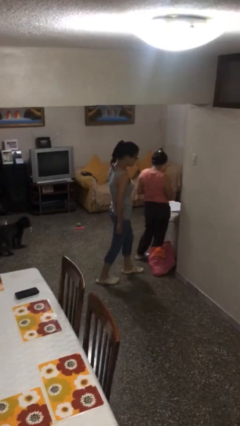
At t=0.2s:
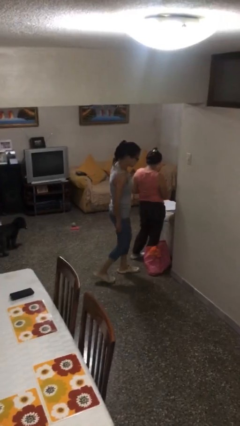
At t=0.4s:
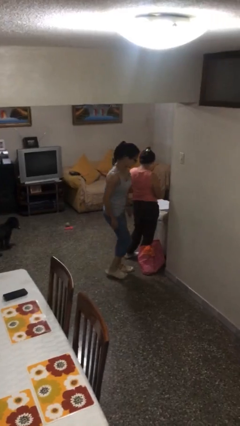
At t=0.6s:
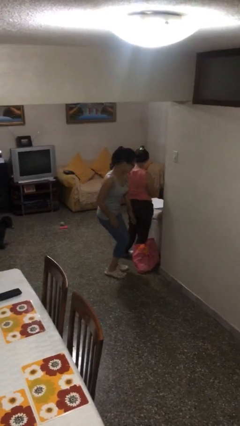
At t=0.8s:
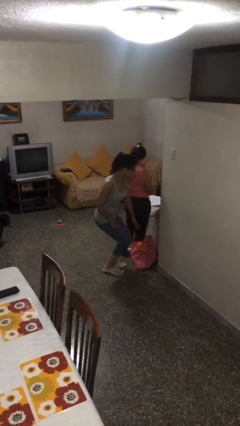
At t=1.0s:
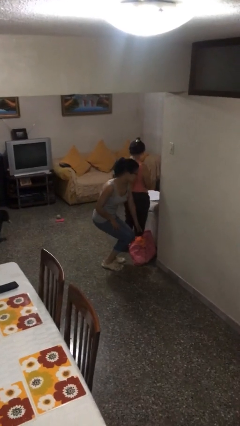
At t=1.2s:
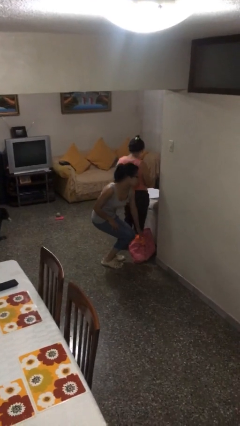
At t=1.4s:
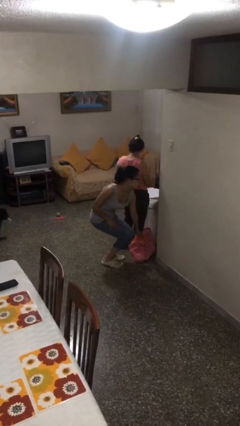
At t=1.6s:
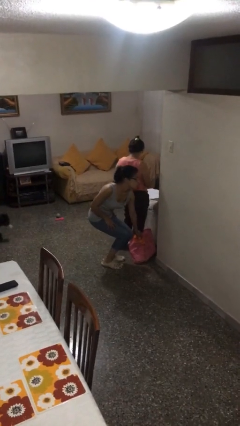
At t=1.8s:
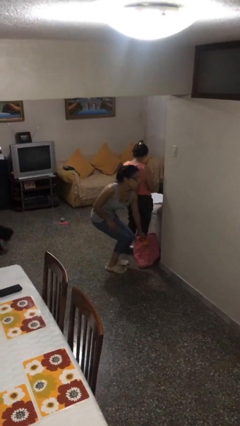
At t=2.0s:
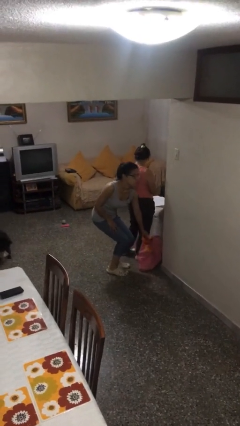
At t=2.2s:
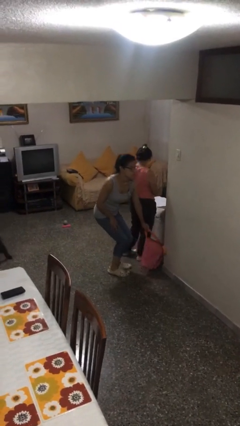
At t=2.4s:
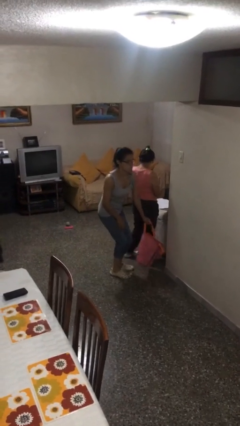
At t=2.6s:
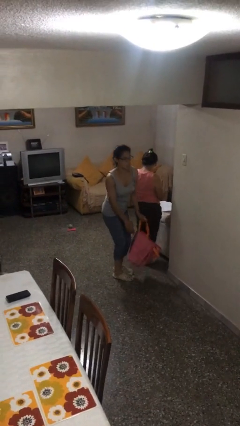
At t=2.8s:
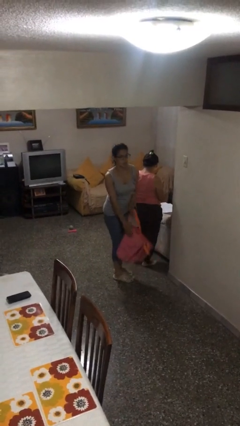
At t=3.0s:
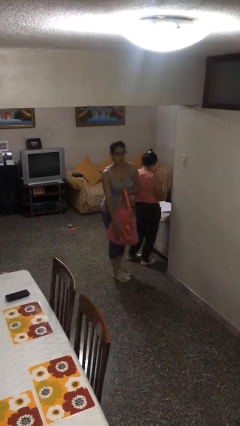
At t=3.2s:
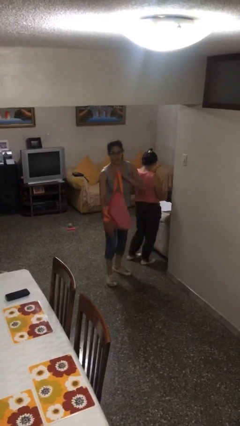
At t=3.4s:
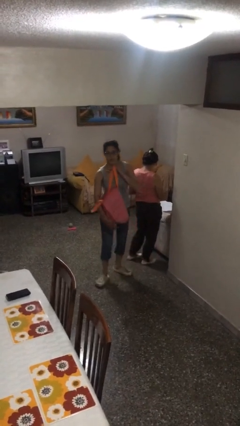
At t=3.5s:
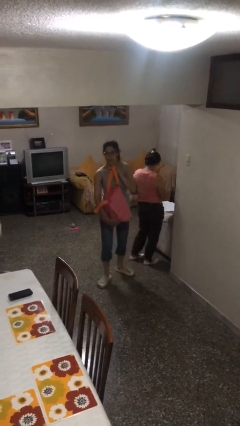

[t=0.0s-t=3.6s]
person steals object from person

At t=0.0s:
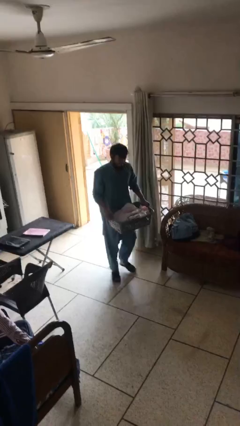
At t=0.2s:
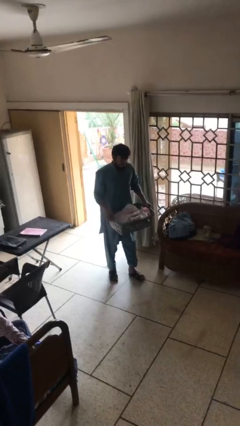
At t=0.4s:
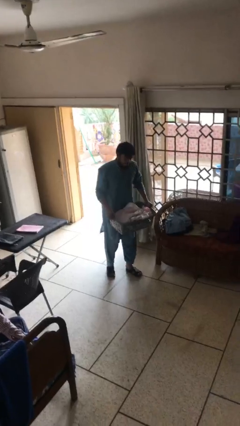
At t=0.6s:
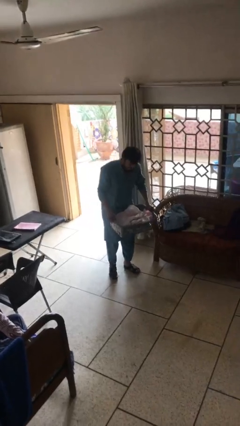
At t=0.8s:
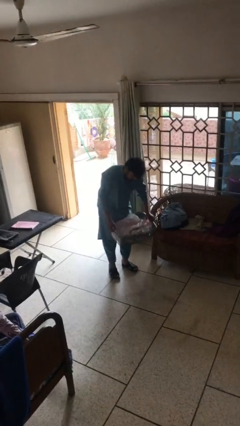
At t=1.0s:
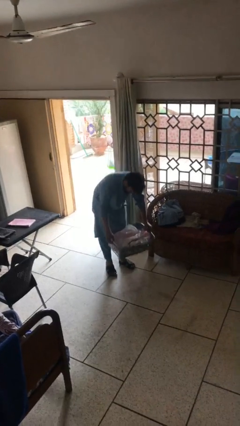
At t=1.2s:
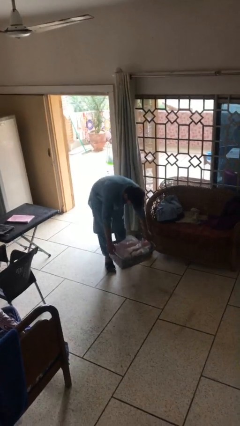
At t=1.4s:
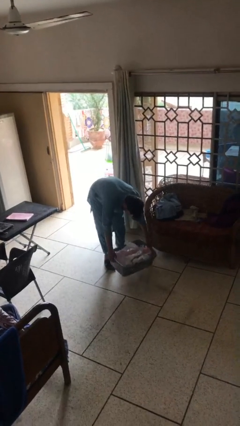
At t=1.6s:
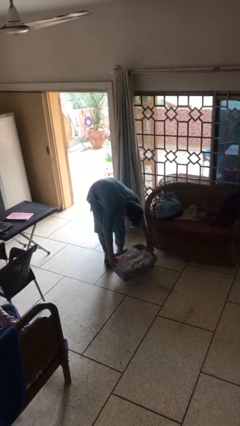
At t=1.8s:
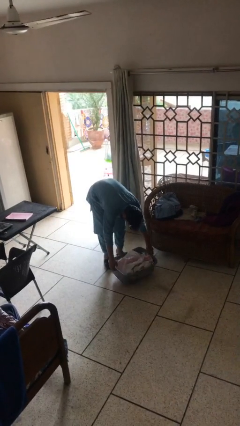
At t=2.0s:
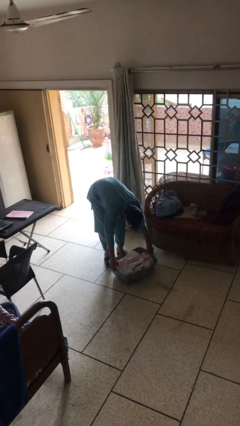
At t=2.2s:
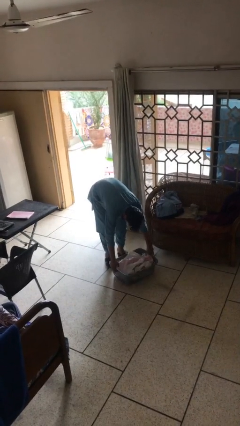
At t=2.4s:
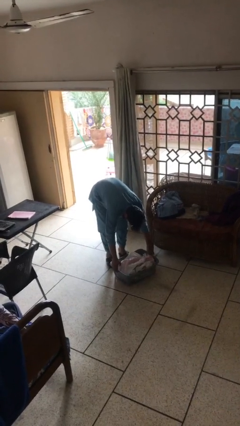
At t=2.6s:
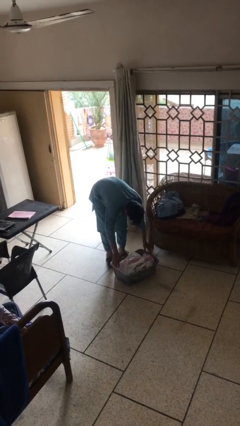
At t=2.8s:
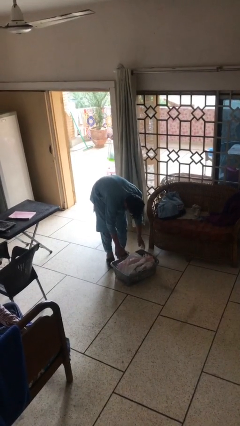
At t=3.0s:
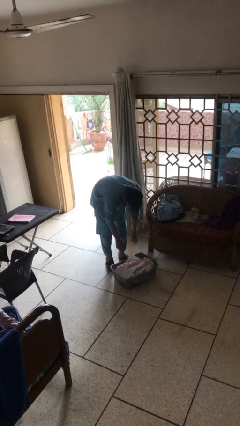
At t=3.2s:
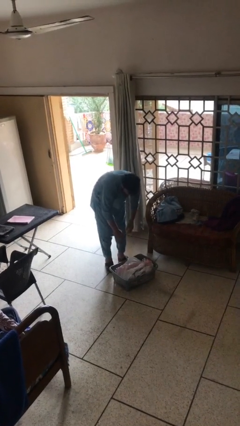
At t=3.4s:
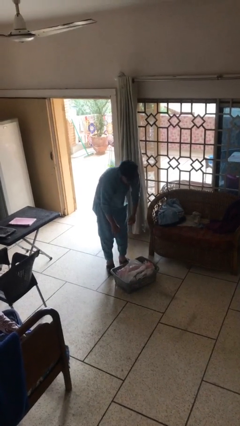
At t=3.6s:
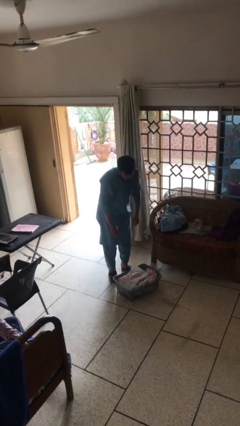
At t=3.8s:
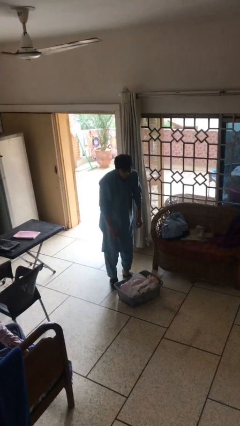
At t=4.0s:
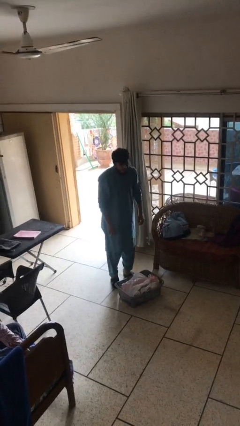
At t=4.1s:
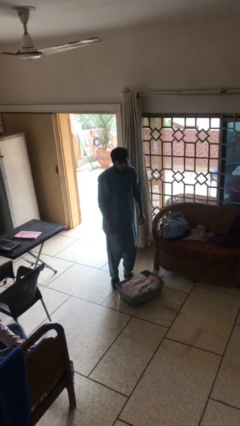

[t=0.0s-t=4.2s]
person puts down object on floor

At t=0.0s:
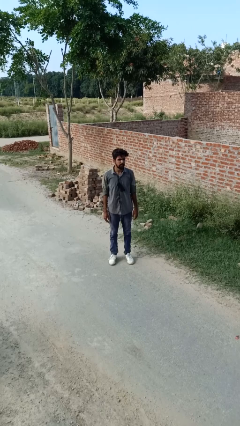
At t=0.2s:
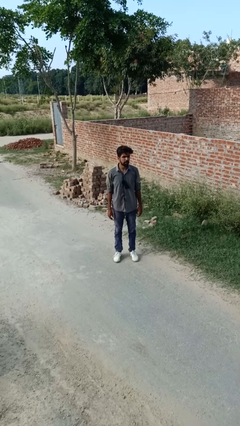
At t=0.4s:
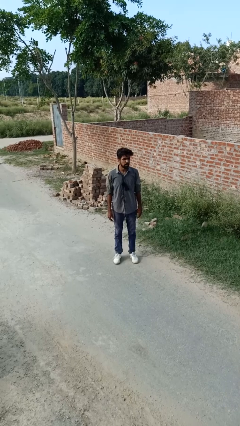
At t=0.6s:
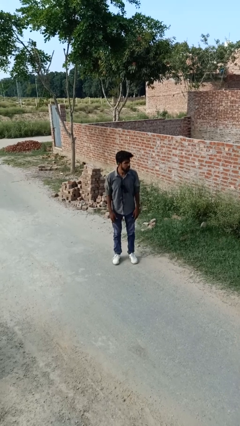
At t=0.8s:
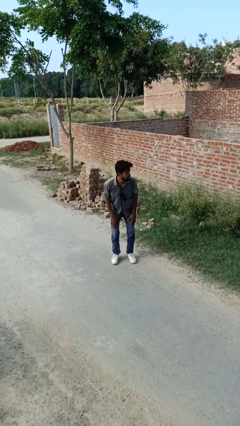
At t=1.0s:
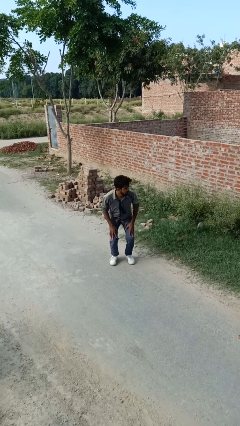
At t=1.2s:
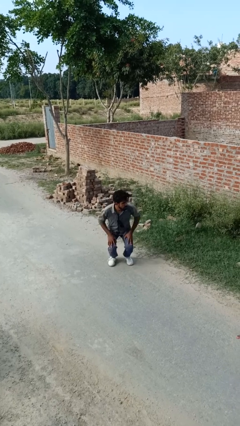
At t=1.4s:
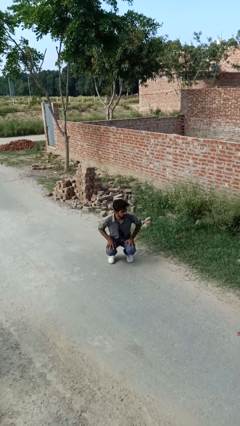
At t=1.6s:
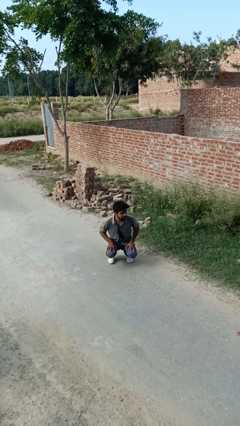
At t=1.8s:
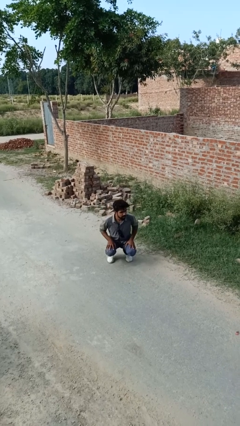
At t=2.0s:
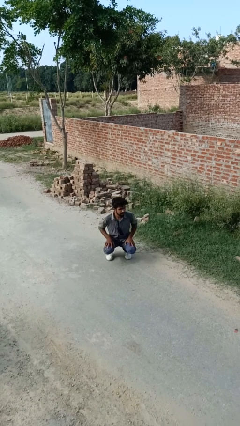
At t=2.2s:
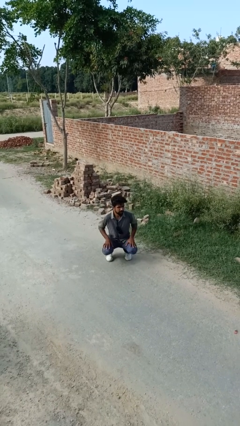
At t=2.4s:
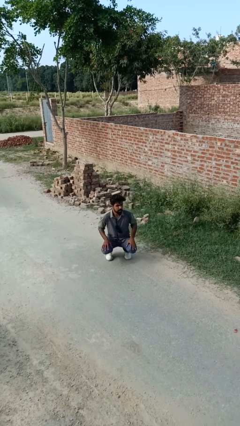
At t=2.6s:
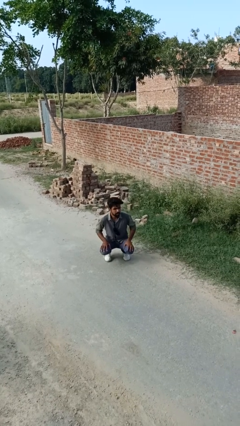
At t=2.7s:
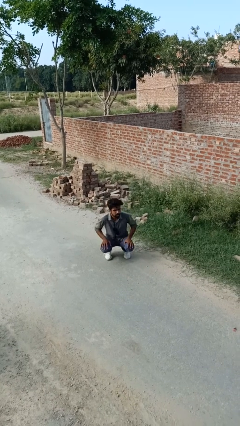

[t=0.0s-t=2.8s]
person kneels

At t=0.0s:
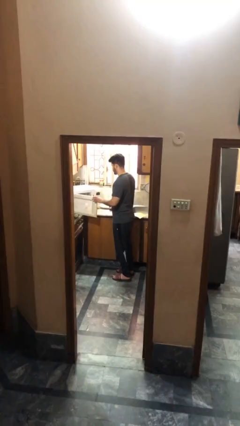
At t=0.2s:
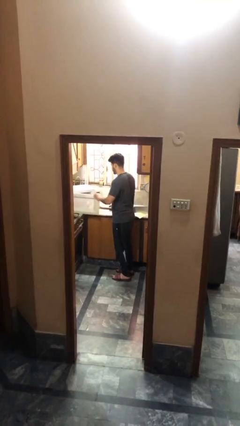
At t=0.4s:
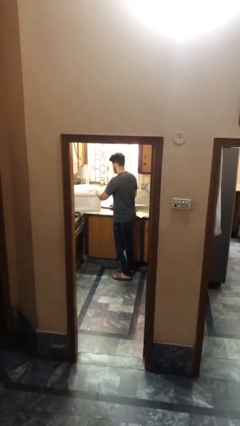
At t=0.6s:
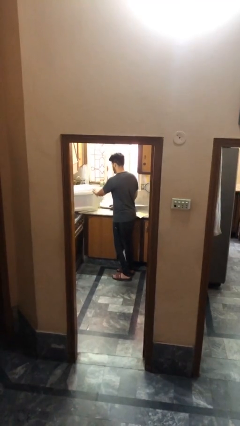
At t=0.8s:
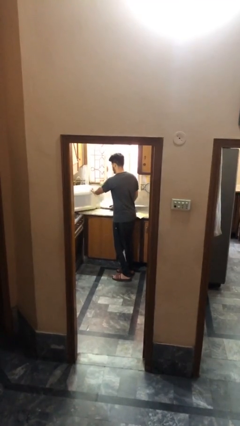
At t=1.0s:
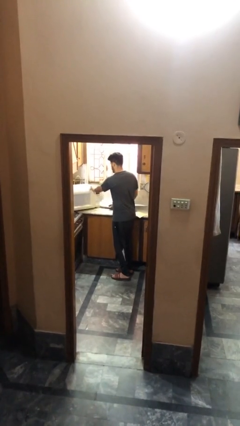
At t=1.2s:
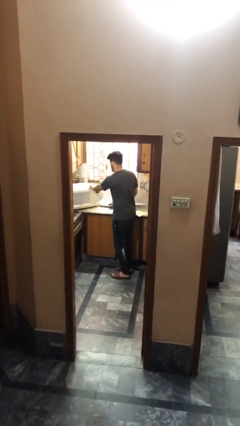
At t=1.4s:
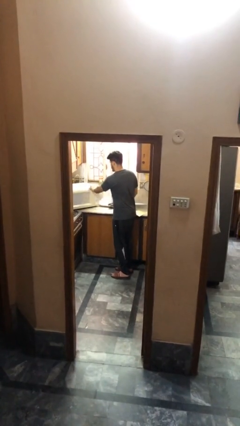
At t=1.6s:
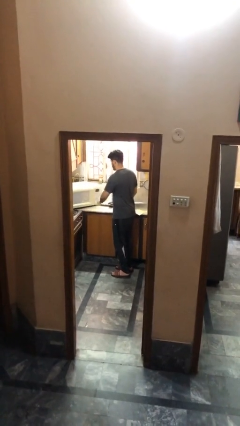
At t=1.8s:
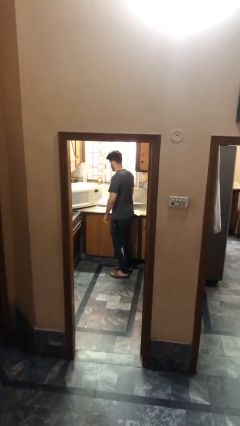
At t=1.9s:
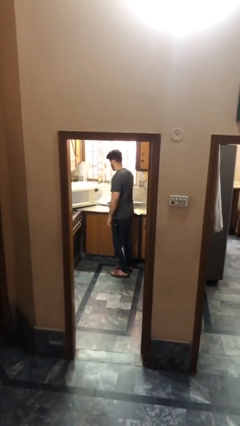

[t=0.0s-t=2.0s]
person closes microwave

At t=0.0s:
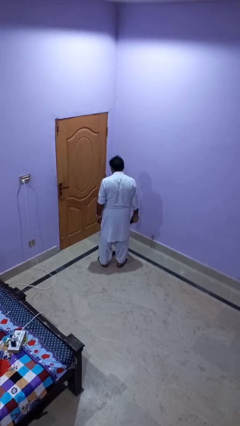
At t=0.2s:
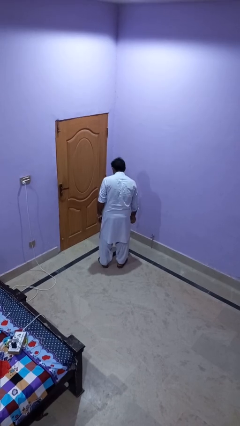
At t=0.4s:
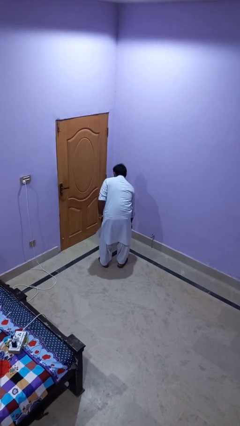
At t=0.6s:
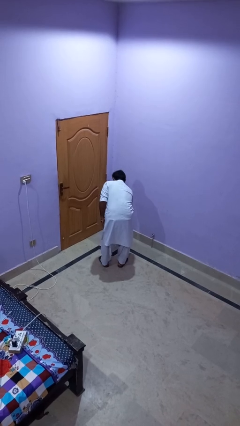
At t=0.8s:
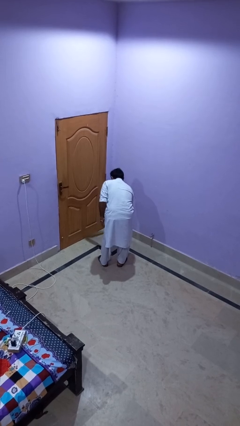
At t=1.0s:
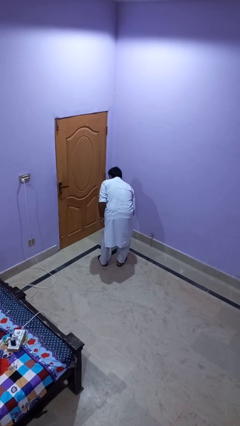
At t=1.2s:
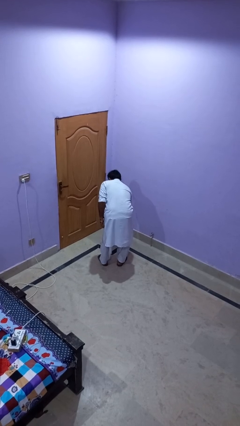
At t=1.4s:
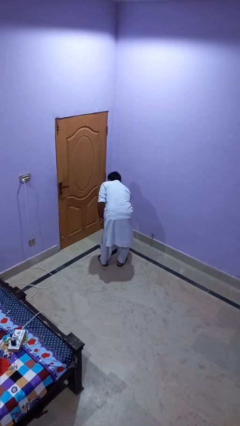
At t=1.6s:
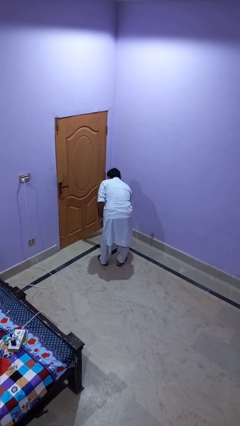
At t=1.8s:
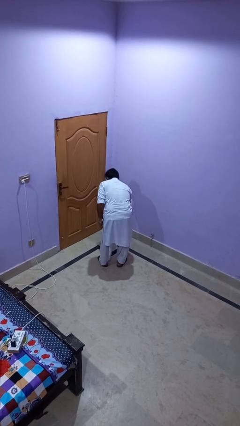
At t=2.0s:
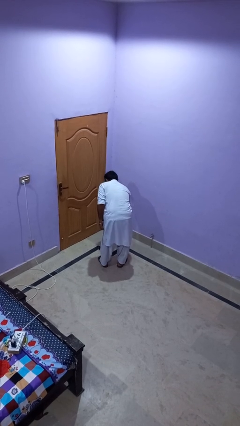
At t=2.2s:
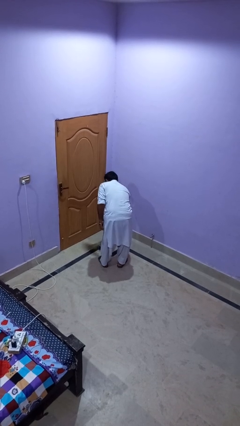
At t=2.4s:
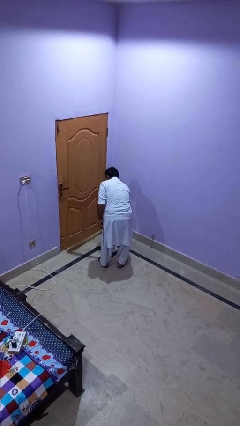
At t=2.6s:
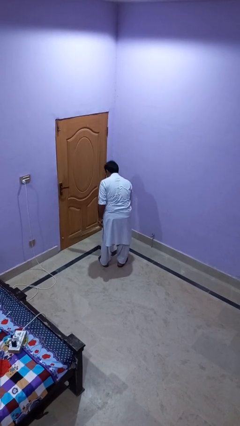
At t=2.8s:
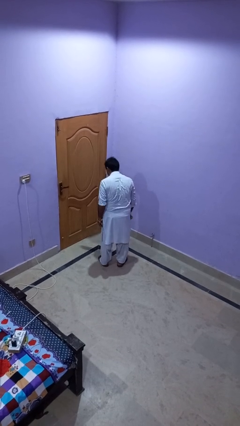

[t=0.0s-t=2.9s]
person sweeps floor

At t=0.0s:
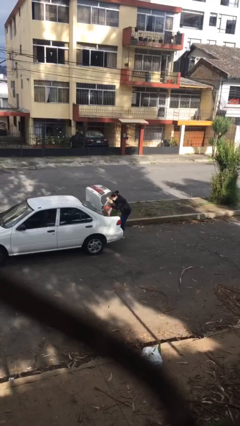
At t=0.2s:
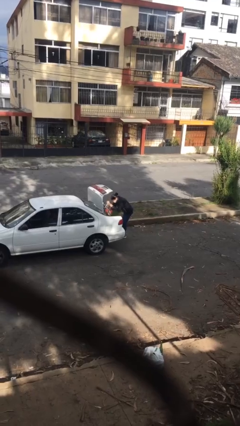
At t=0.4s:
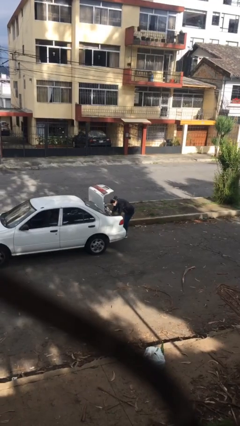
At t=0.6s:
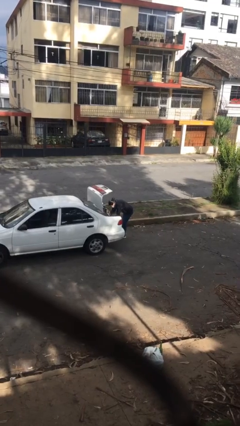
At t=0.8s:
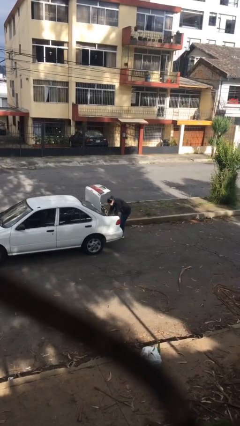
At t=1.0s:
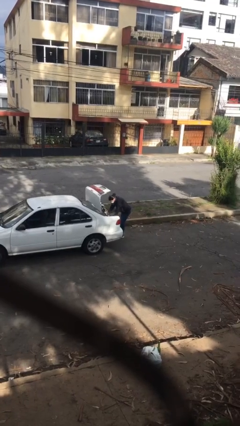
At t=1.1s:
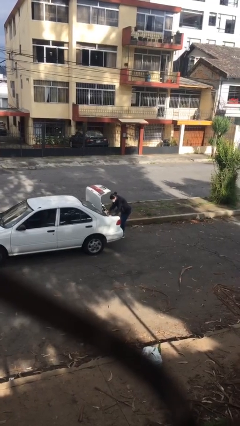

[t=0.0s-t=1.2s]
person loads car

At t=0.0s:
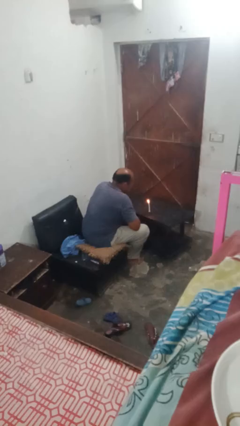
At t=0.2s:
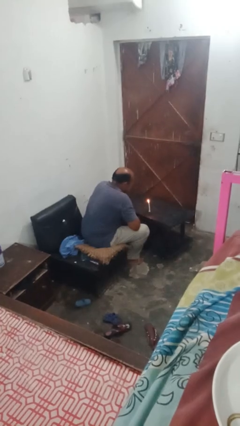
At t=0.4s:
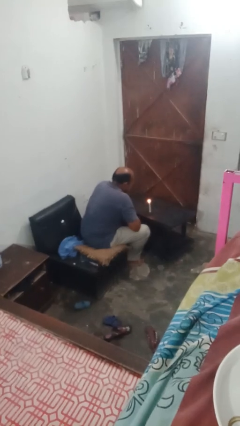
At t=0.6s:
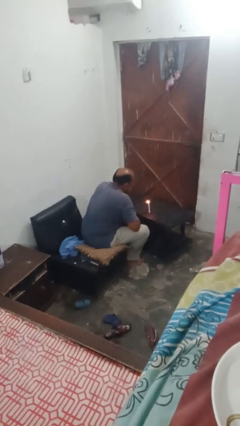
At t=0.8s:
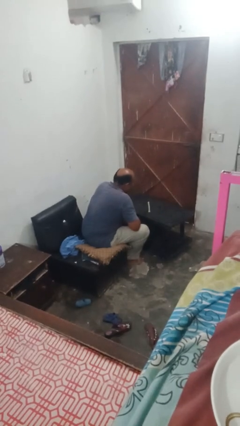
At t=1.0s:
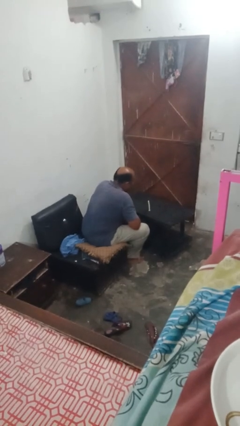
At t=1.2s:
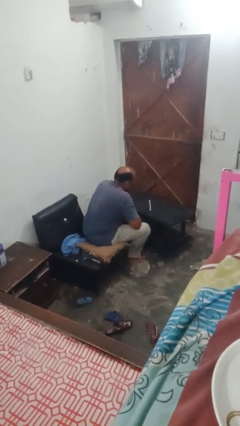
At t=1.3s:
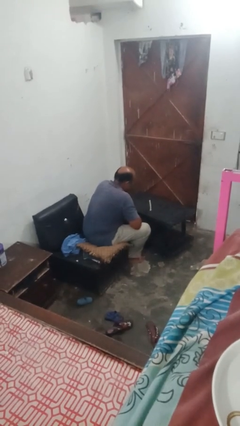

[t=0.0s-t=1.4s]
person extinguishes candle
